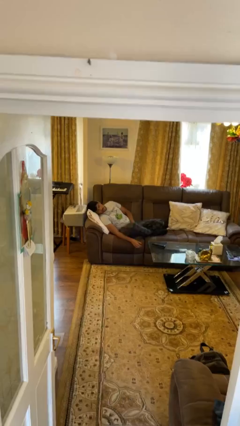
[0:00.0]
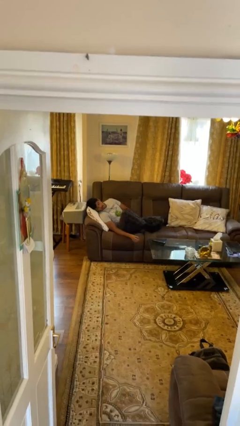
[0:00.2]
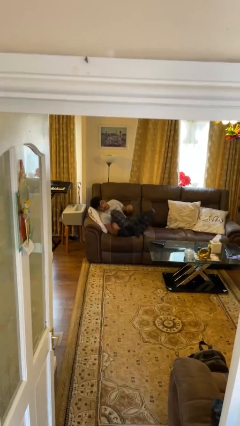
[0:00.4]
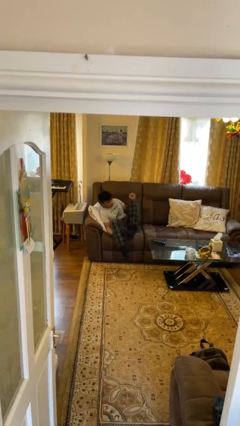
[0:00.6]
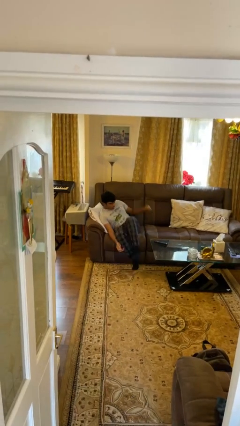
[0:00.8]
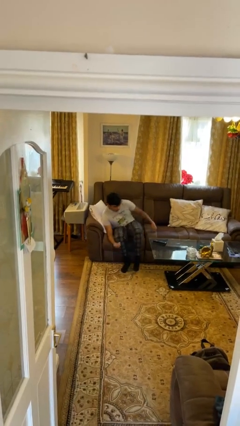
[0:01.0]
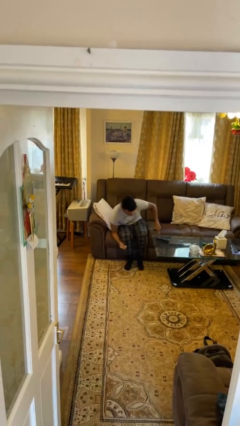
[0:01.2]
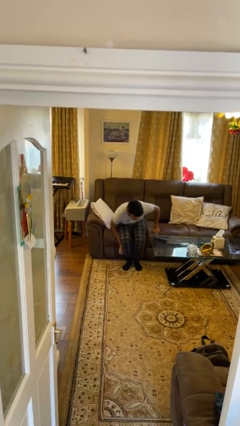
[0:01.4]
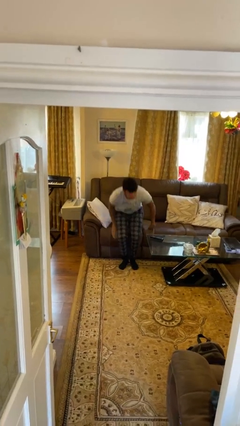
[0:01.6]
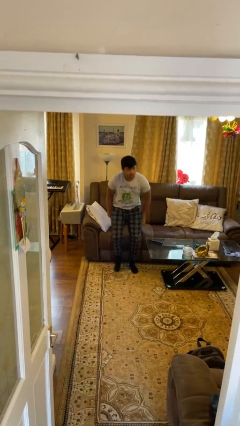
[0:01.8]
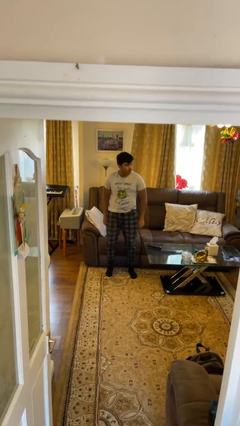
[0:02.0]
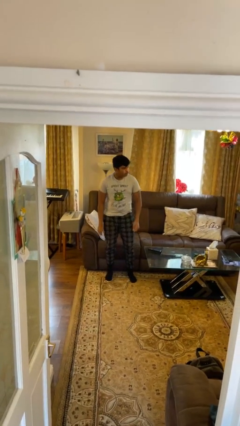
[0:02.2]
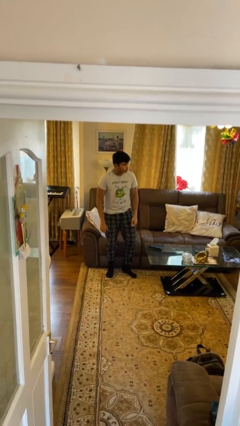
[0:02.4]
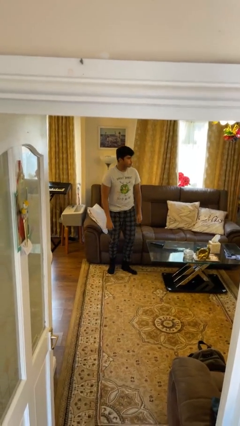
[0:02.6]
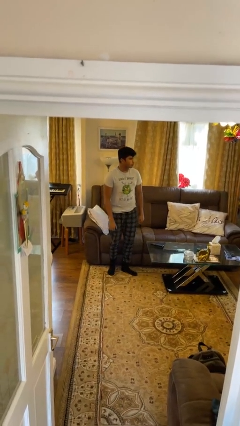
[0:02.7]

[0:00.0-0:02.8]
person stands up

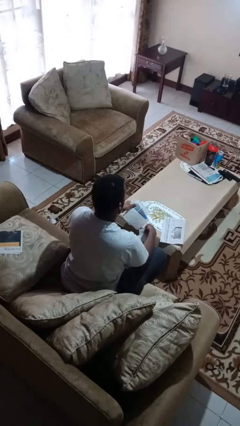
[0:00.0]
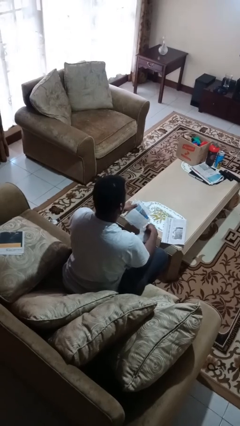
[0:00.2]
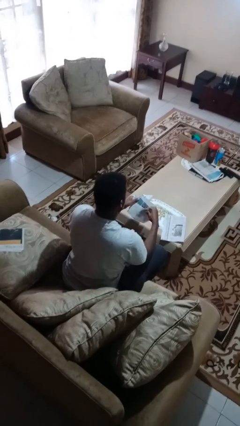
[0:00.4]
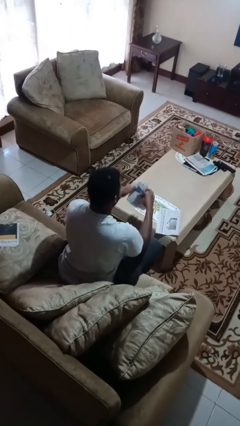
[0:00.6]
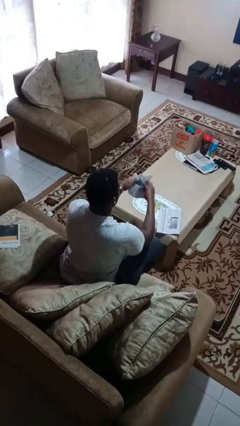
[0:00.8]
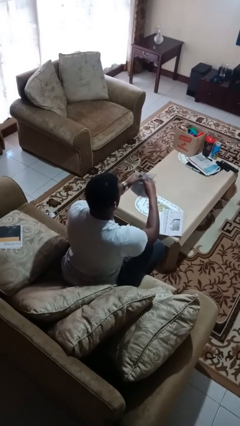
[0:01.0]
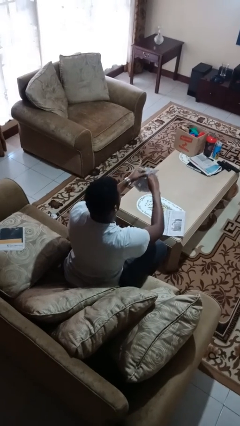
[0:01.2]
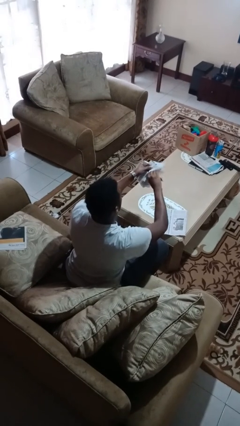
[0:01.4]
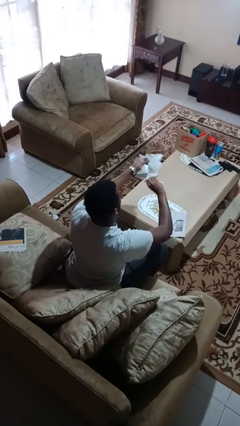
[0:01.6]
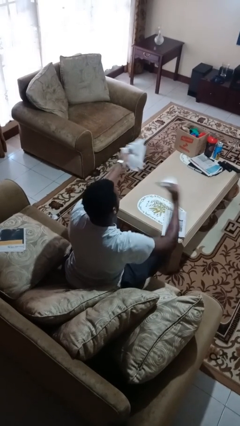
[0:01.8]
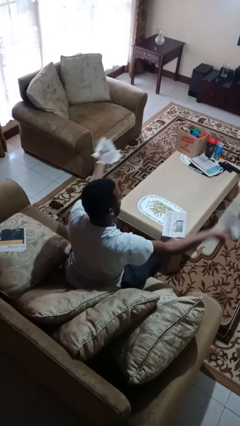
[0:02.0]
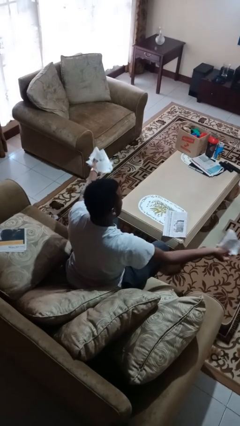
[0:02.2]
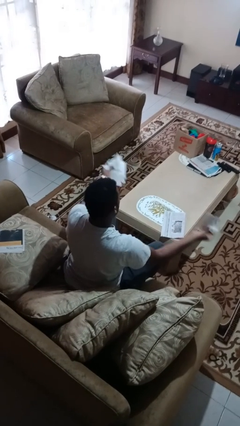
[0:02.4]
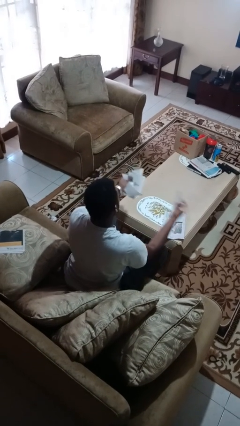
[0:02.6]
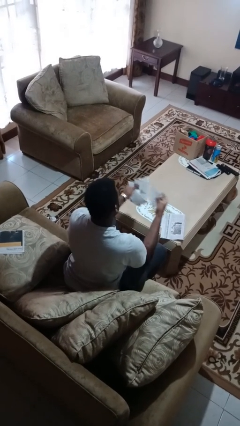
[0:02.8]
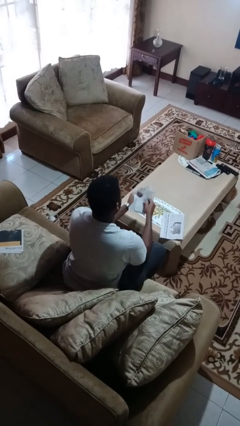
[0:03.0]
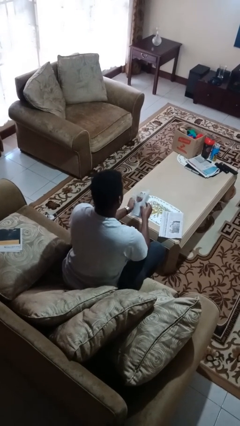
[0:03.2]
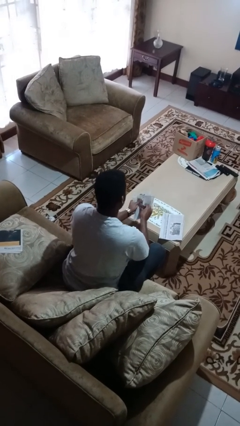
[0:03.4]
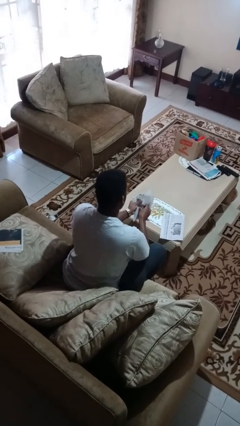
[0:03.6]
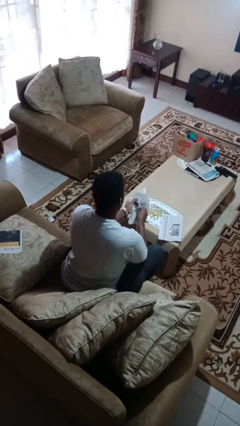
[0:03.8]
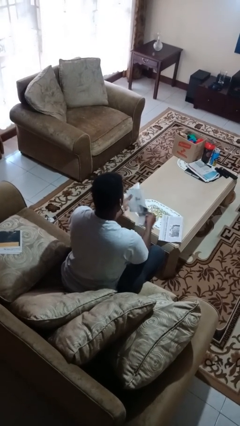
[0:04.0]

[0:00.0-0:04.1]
person tears paper

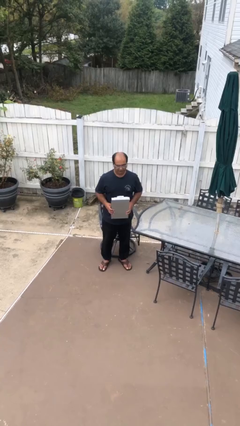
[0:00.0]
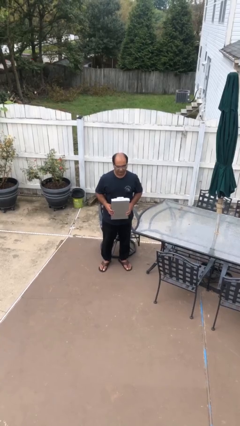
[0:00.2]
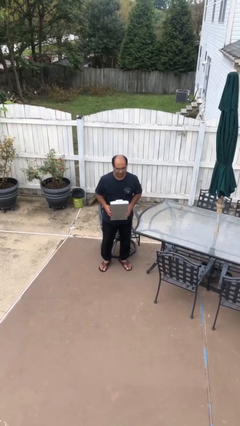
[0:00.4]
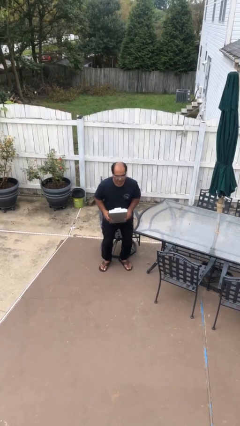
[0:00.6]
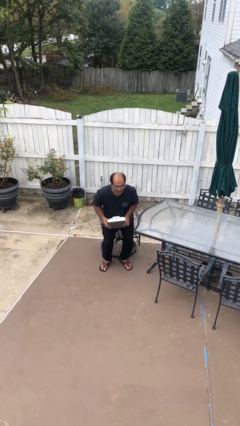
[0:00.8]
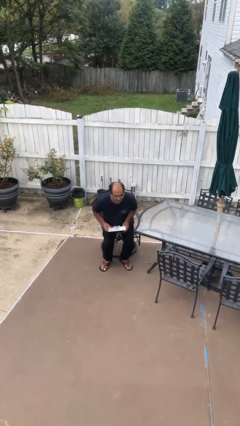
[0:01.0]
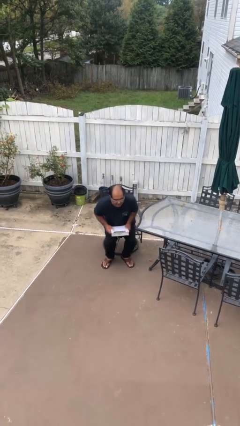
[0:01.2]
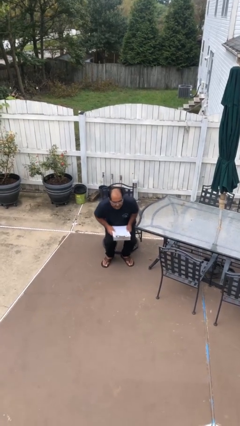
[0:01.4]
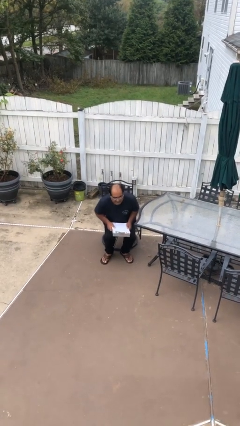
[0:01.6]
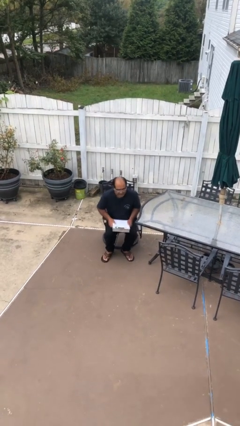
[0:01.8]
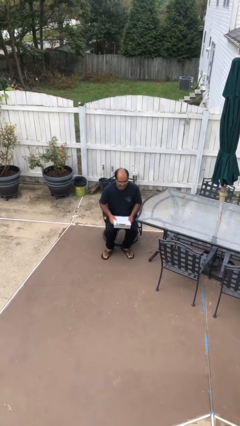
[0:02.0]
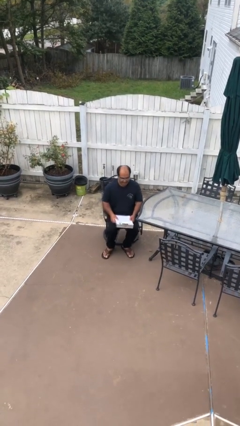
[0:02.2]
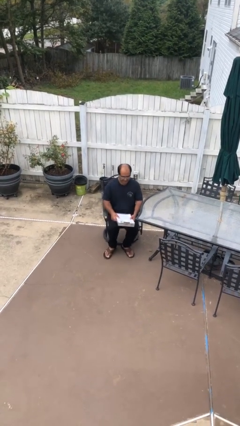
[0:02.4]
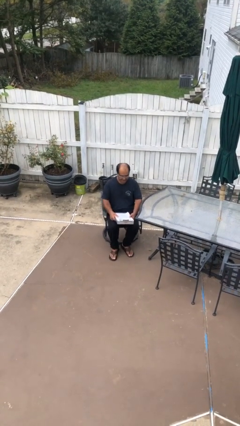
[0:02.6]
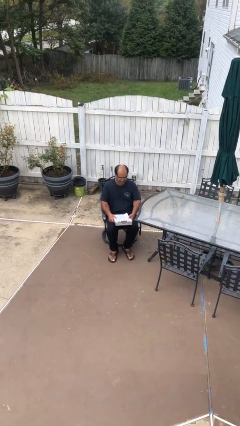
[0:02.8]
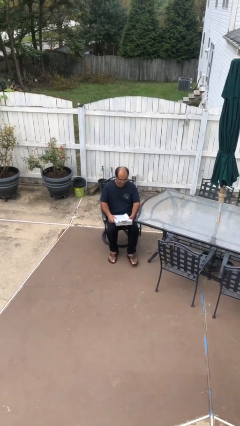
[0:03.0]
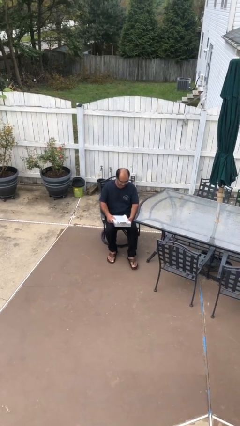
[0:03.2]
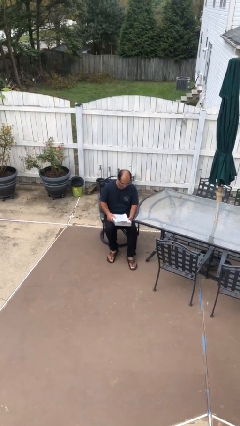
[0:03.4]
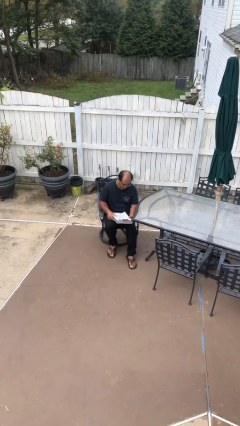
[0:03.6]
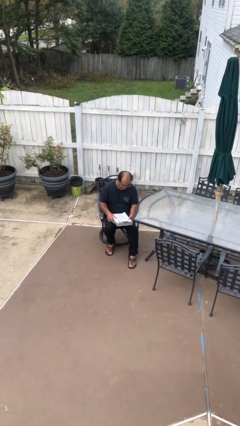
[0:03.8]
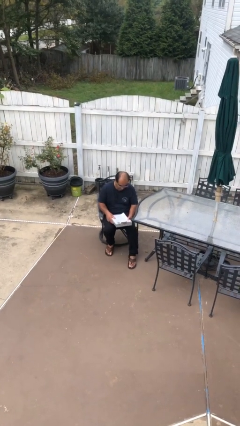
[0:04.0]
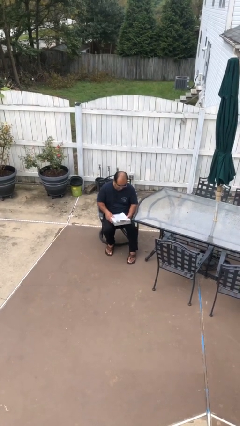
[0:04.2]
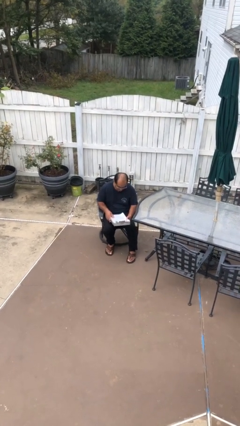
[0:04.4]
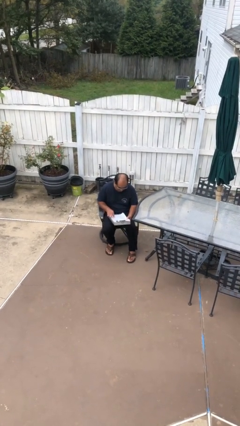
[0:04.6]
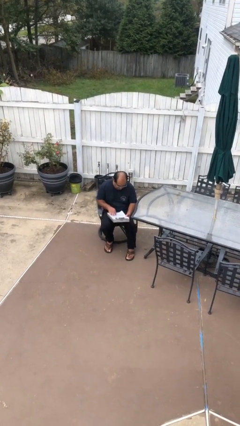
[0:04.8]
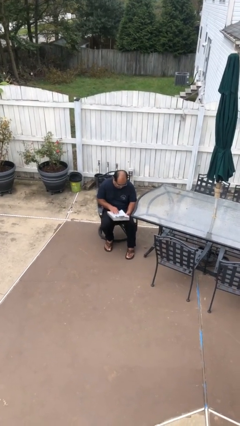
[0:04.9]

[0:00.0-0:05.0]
person sits down

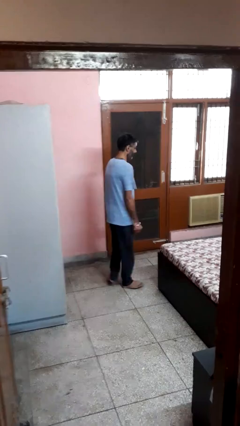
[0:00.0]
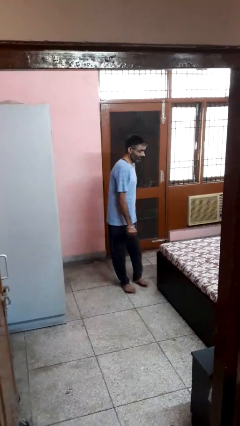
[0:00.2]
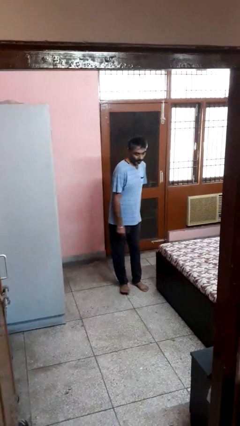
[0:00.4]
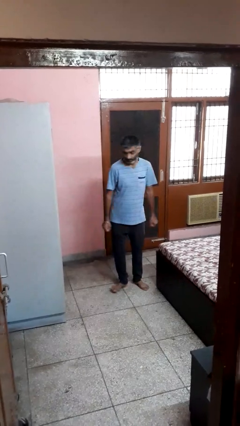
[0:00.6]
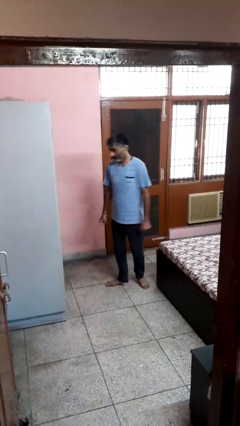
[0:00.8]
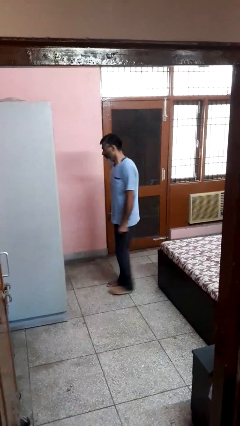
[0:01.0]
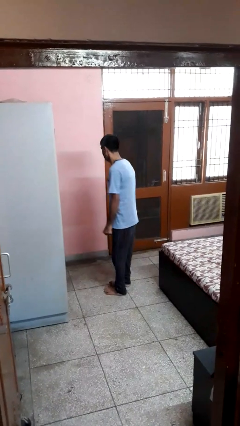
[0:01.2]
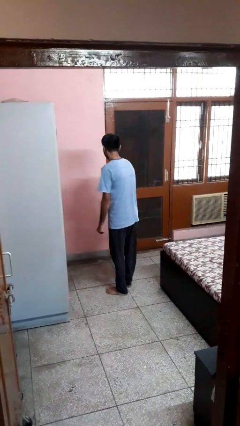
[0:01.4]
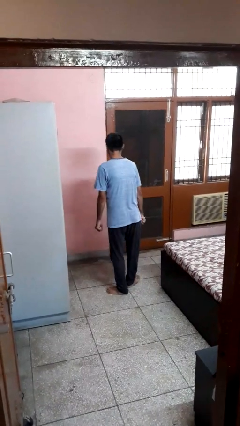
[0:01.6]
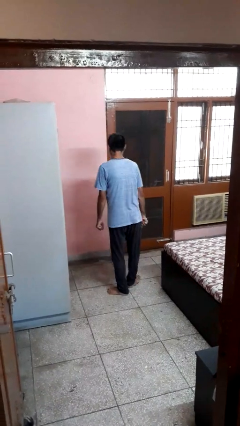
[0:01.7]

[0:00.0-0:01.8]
person twirls

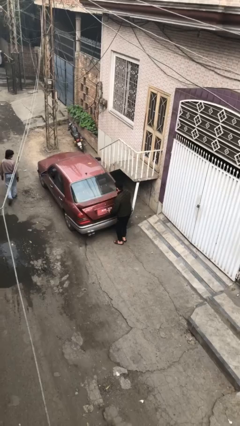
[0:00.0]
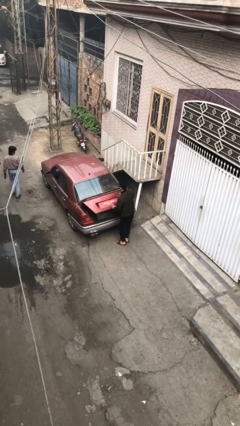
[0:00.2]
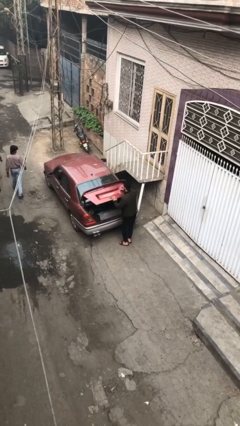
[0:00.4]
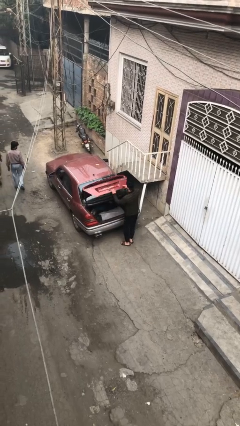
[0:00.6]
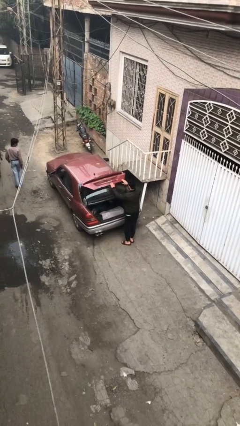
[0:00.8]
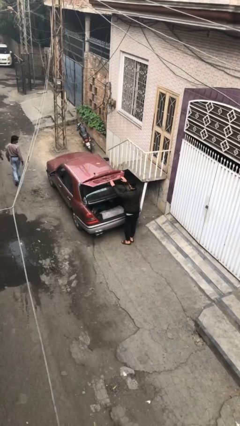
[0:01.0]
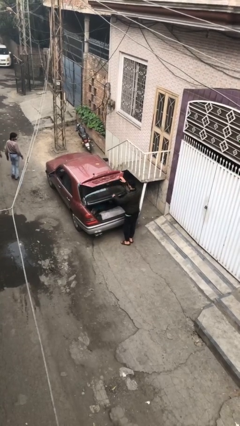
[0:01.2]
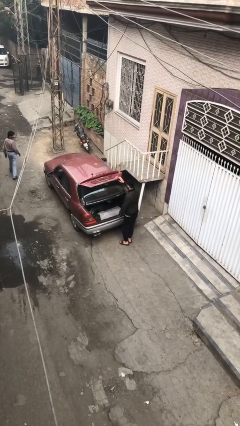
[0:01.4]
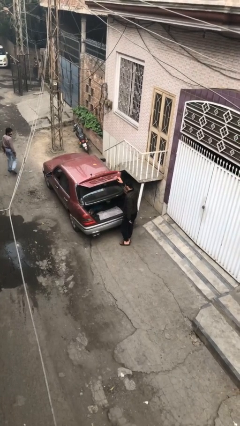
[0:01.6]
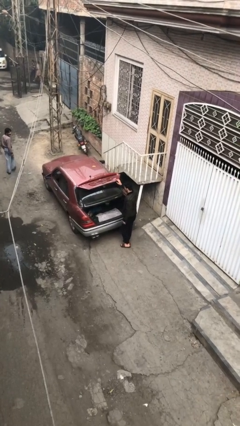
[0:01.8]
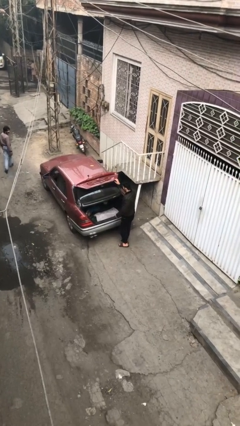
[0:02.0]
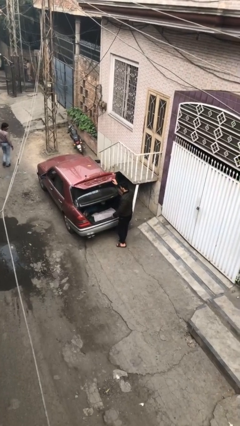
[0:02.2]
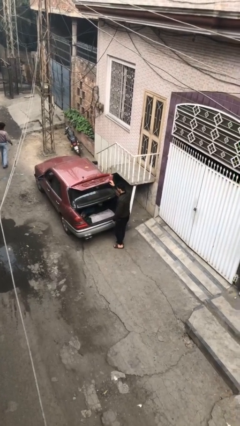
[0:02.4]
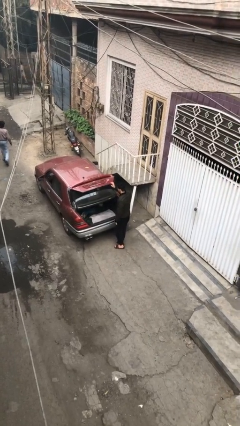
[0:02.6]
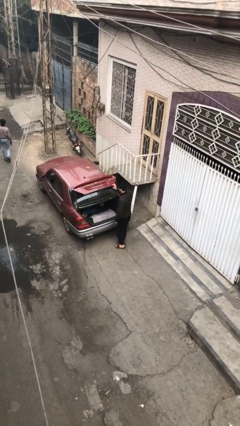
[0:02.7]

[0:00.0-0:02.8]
person opens car trunk

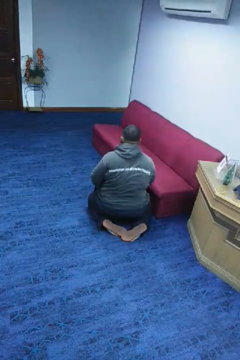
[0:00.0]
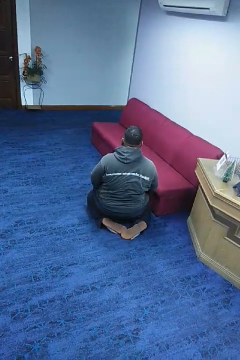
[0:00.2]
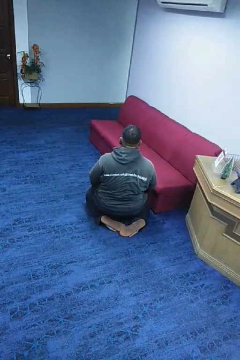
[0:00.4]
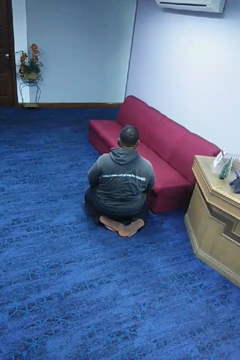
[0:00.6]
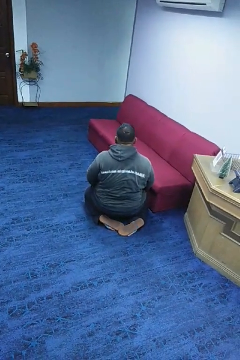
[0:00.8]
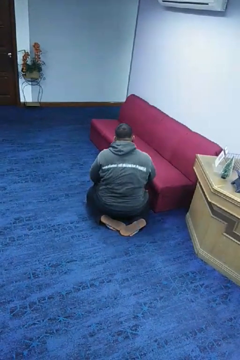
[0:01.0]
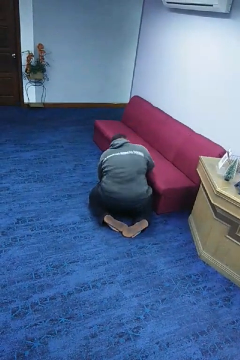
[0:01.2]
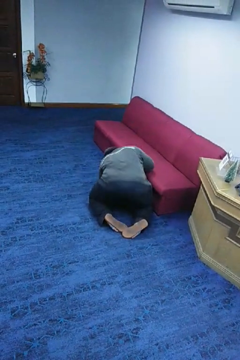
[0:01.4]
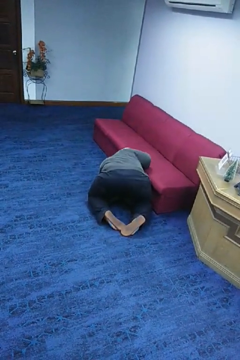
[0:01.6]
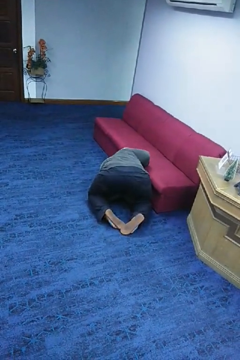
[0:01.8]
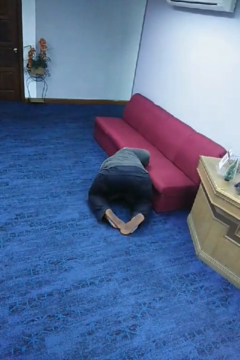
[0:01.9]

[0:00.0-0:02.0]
person searches under couch
